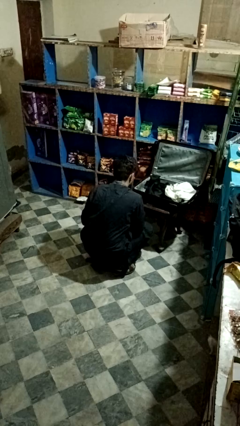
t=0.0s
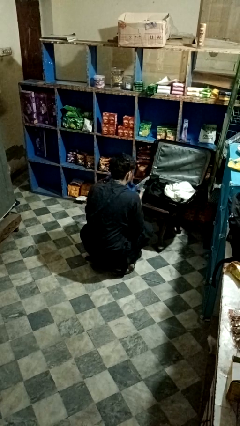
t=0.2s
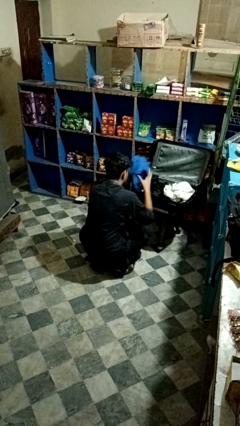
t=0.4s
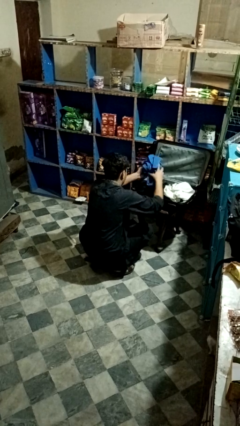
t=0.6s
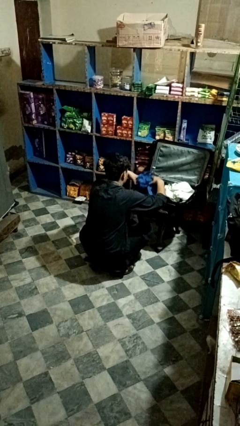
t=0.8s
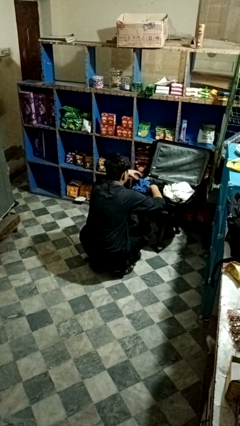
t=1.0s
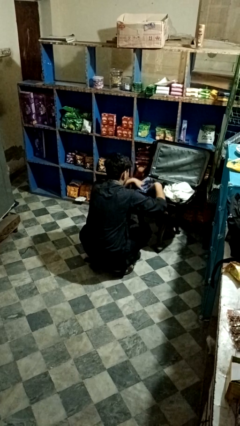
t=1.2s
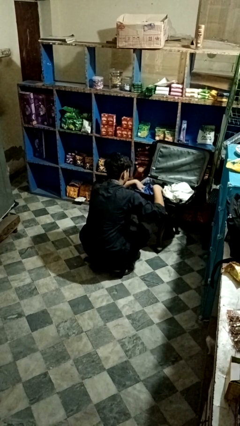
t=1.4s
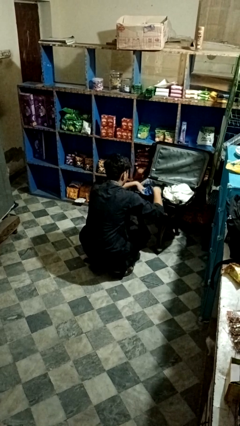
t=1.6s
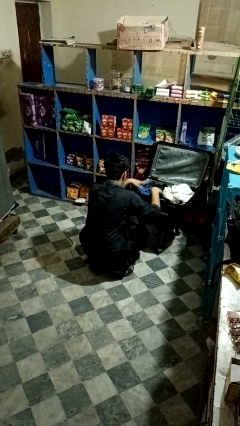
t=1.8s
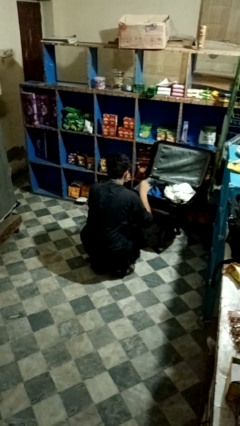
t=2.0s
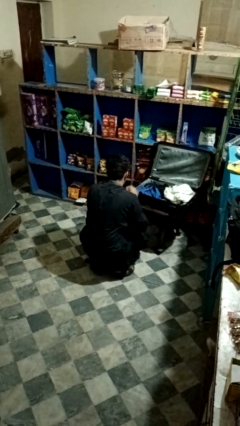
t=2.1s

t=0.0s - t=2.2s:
person loads clothes into suitcase

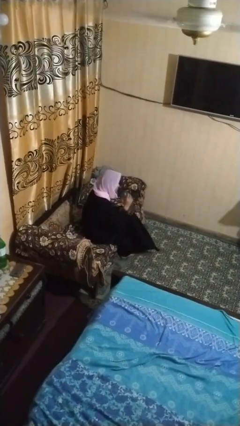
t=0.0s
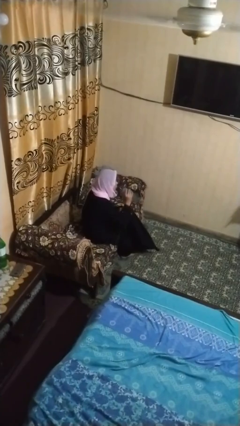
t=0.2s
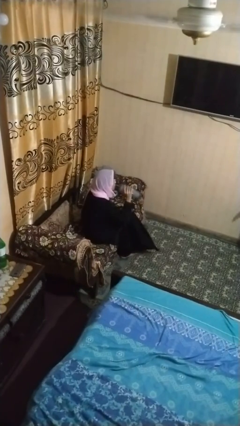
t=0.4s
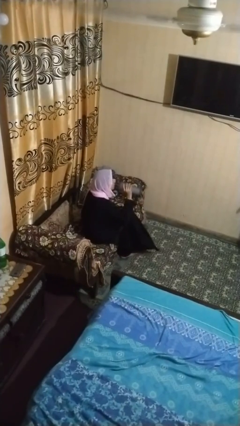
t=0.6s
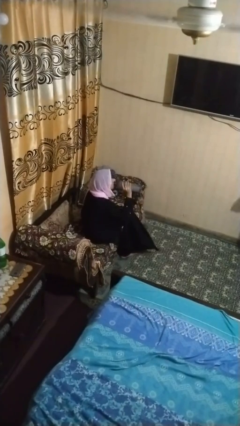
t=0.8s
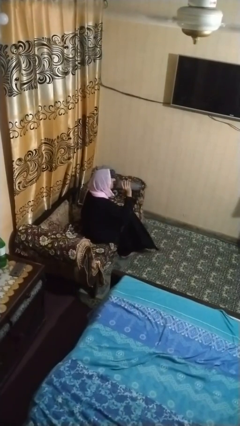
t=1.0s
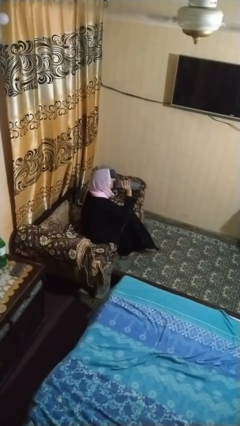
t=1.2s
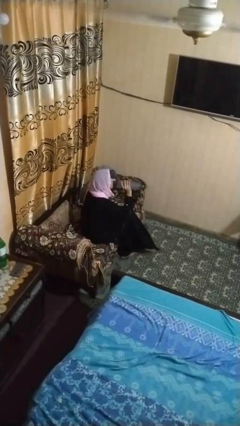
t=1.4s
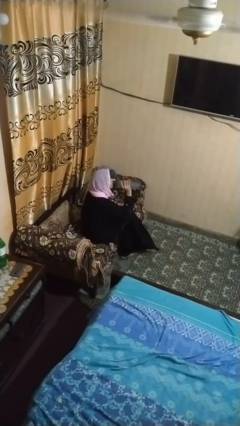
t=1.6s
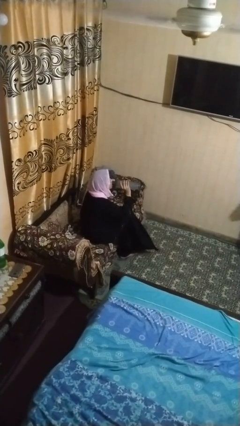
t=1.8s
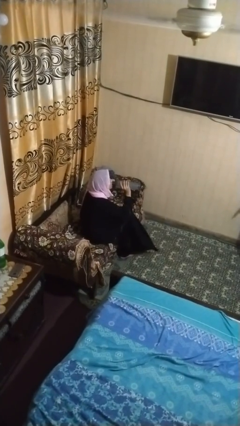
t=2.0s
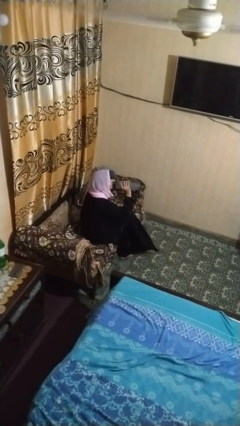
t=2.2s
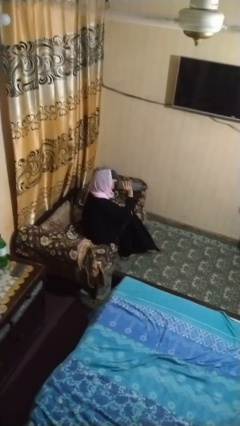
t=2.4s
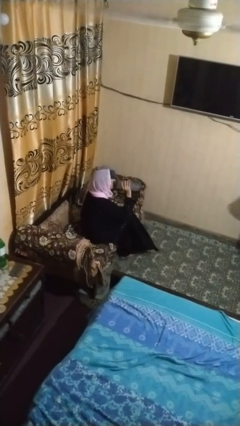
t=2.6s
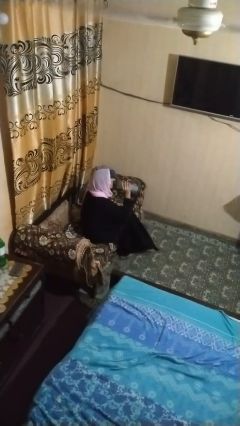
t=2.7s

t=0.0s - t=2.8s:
person drinks from bottle

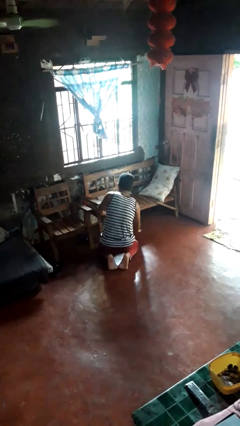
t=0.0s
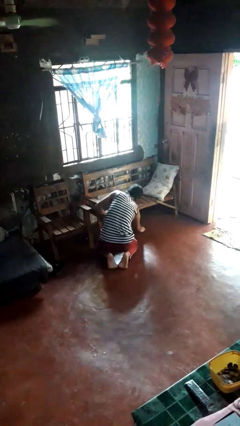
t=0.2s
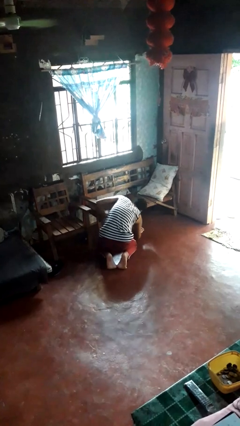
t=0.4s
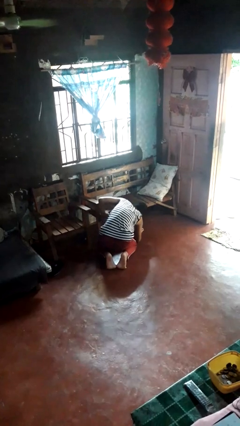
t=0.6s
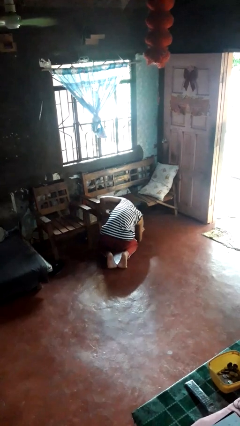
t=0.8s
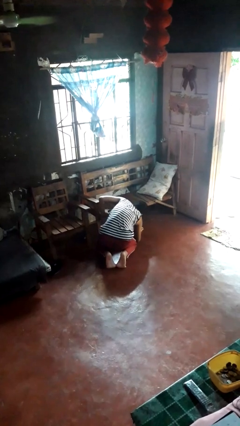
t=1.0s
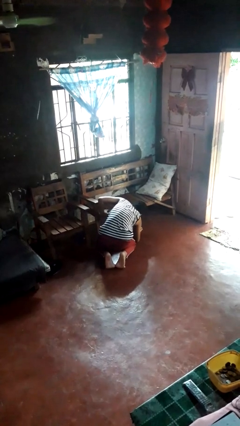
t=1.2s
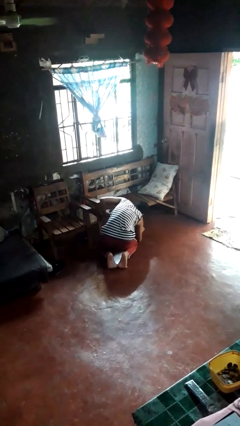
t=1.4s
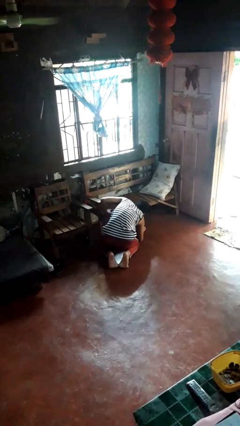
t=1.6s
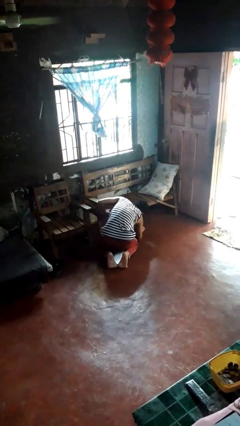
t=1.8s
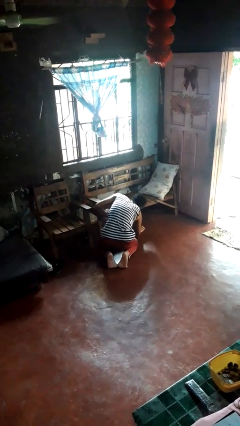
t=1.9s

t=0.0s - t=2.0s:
person searches in couch

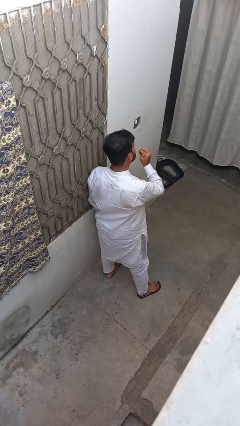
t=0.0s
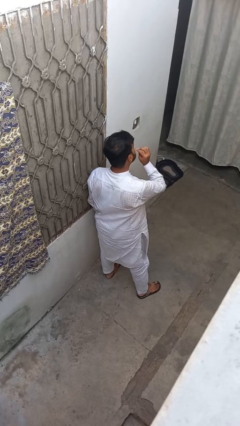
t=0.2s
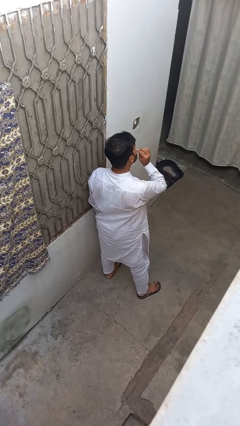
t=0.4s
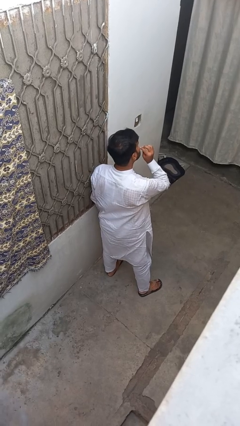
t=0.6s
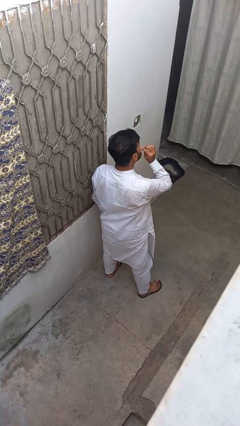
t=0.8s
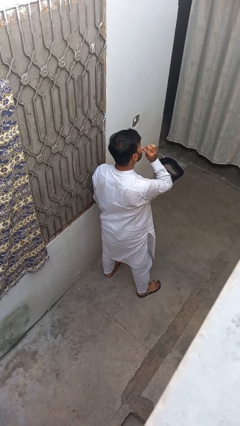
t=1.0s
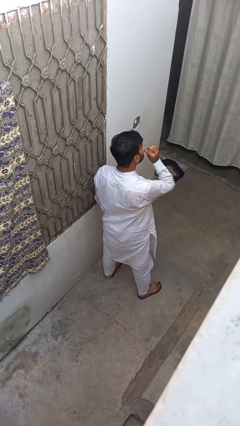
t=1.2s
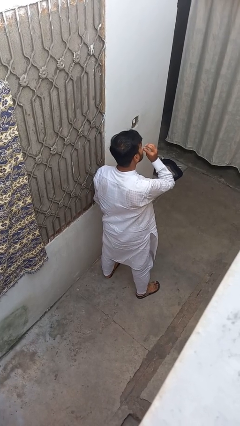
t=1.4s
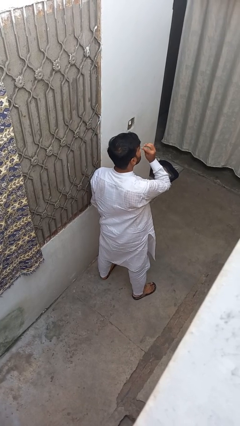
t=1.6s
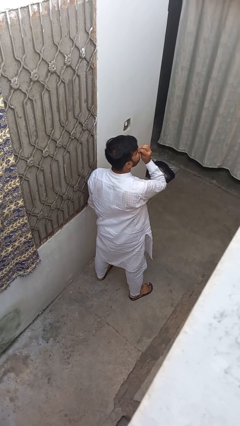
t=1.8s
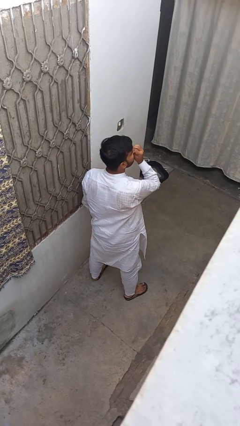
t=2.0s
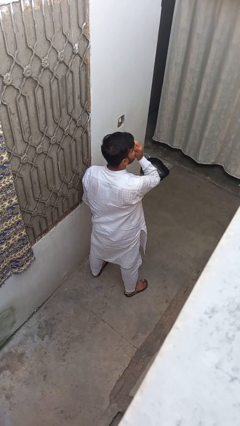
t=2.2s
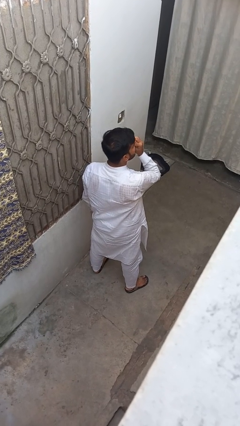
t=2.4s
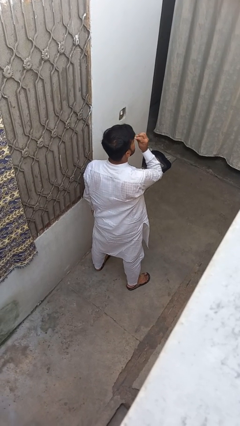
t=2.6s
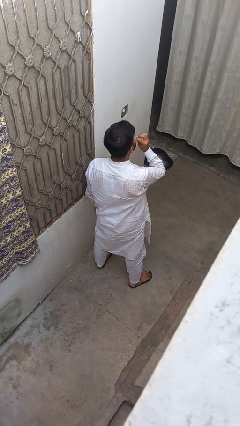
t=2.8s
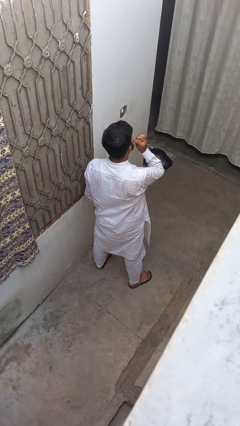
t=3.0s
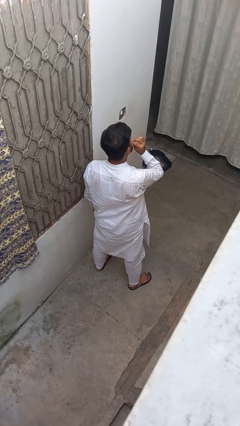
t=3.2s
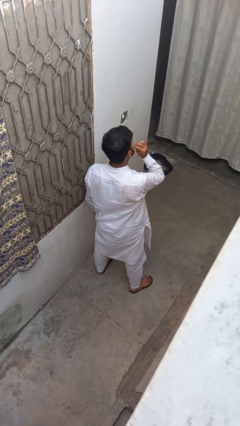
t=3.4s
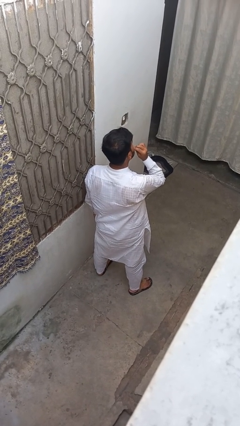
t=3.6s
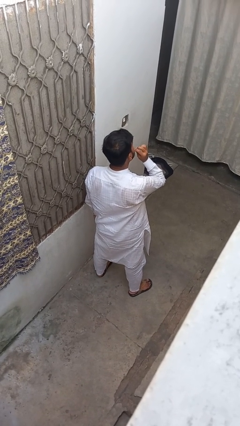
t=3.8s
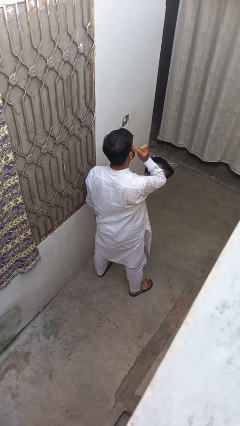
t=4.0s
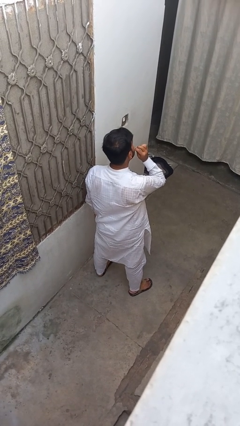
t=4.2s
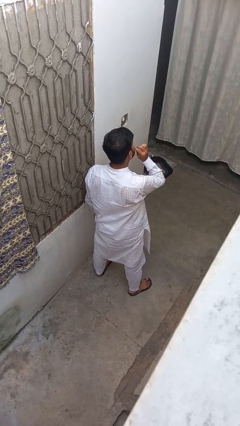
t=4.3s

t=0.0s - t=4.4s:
person flosses

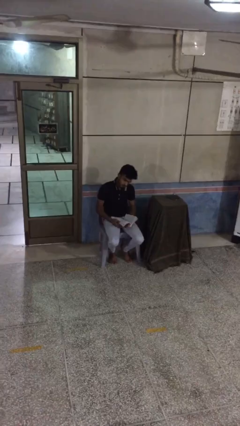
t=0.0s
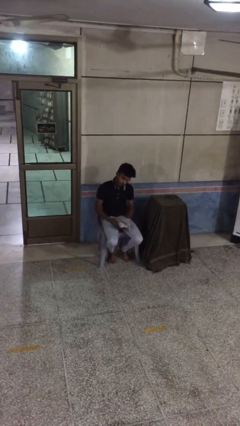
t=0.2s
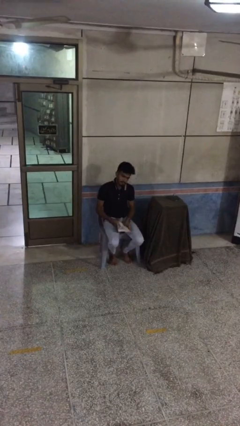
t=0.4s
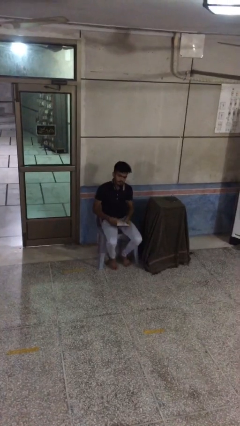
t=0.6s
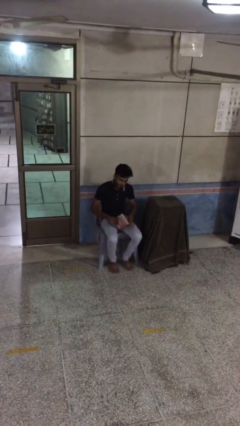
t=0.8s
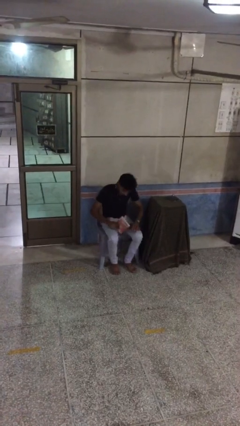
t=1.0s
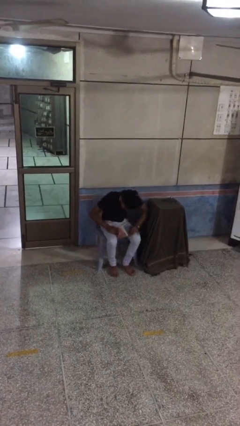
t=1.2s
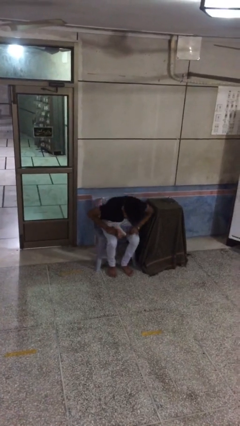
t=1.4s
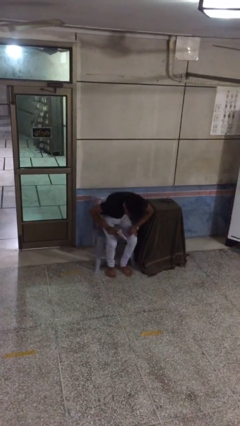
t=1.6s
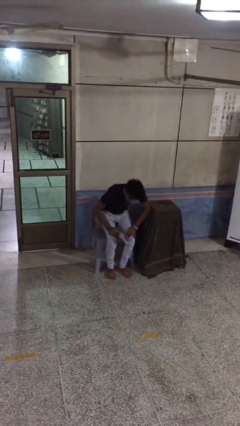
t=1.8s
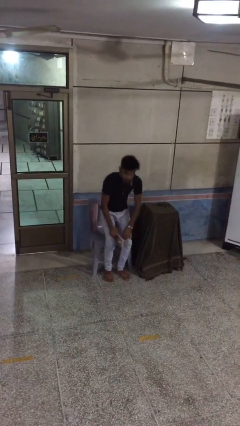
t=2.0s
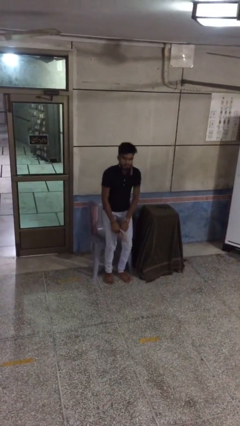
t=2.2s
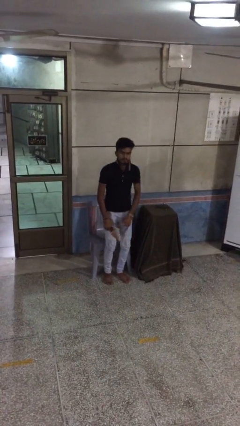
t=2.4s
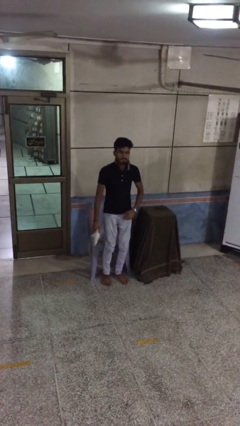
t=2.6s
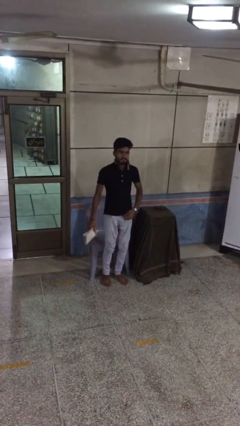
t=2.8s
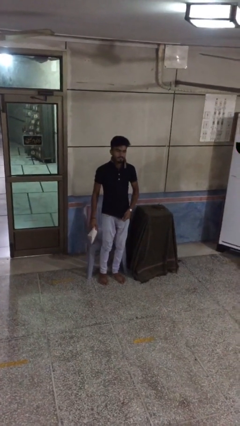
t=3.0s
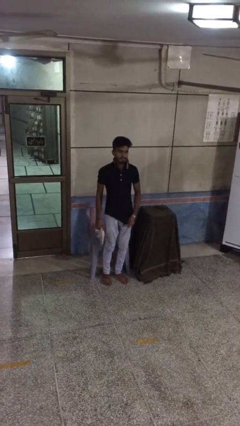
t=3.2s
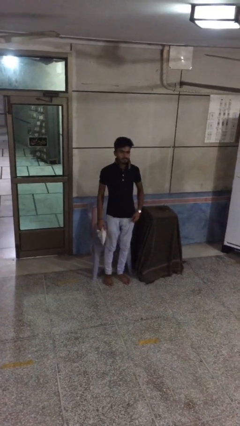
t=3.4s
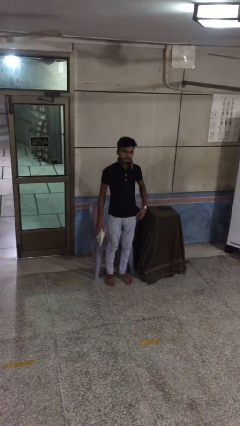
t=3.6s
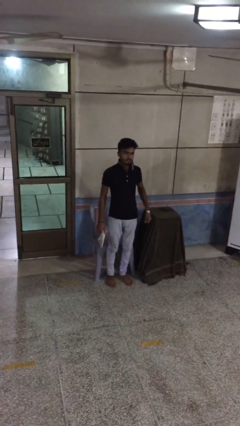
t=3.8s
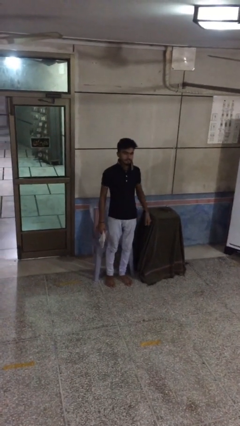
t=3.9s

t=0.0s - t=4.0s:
person stands up

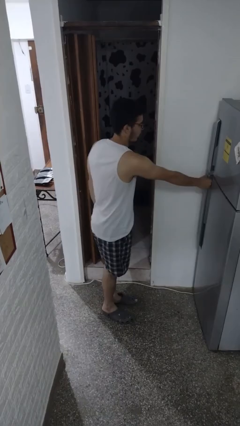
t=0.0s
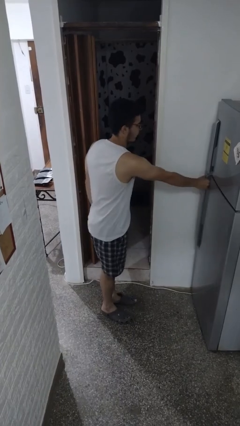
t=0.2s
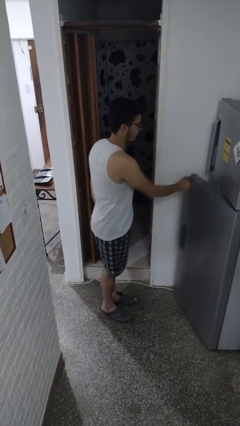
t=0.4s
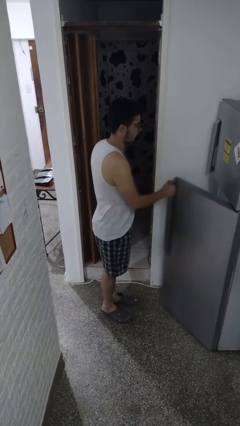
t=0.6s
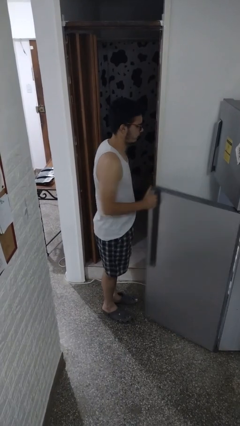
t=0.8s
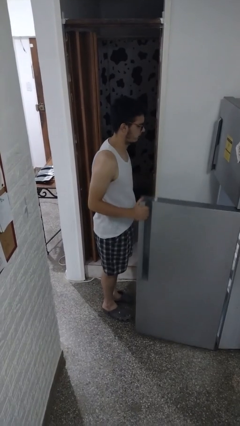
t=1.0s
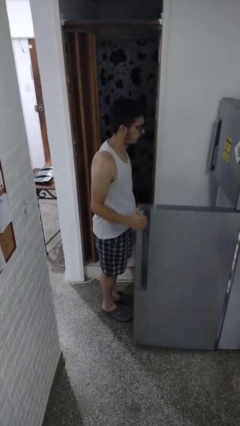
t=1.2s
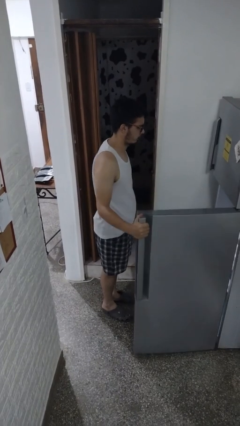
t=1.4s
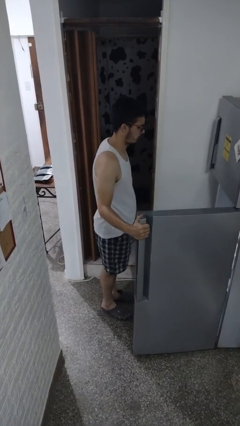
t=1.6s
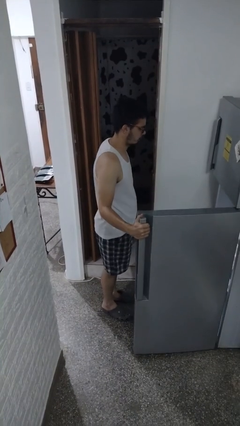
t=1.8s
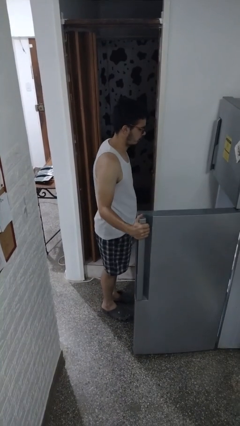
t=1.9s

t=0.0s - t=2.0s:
person opens refrigerator

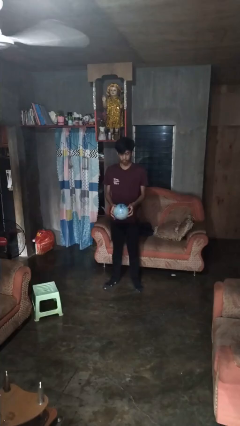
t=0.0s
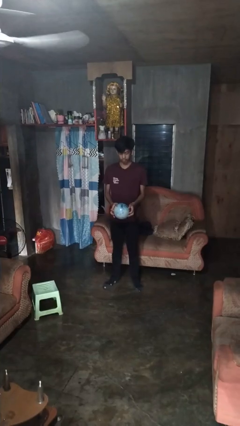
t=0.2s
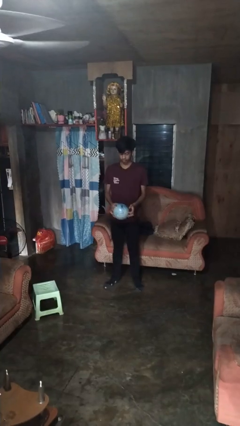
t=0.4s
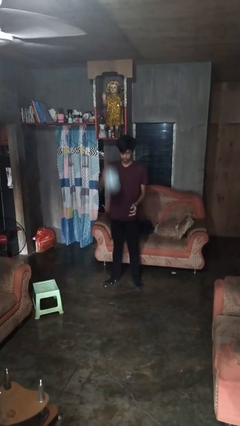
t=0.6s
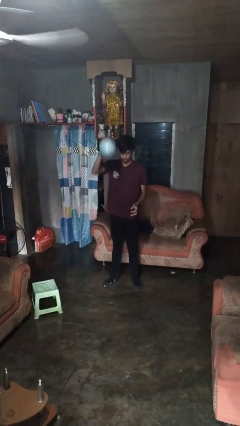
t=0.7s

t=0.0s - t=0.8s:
person bounces ball on floor
